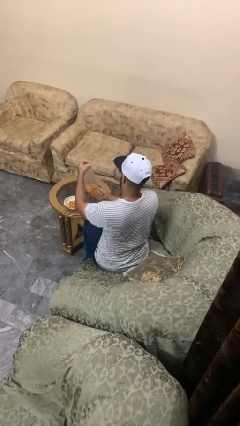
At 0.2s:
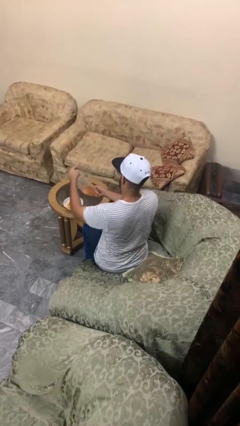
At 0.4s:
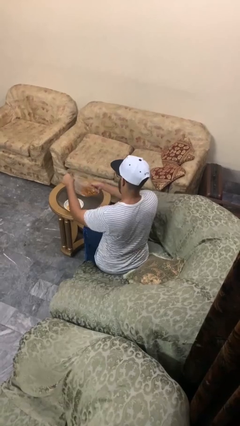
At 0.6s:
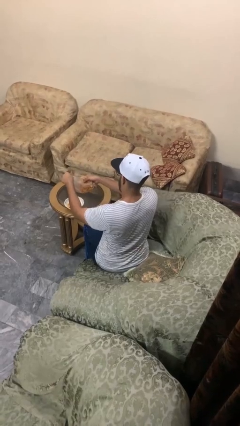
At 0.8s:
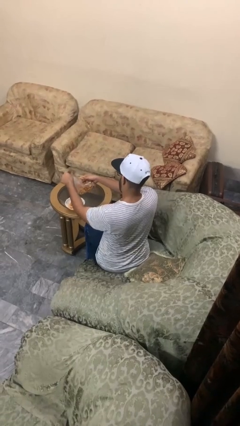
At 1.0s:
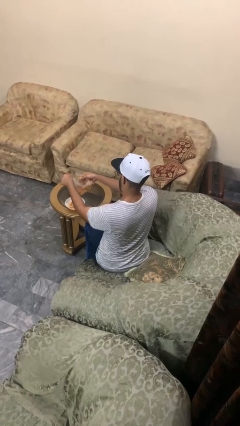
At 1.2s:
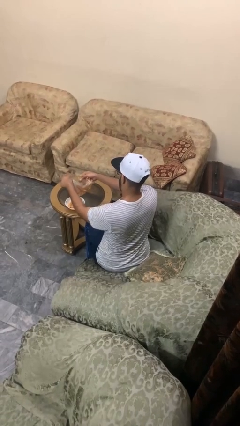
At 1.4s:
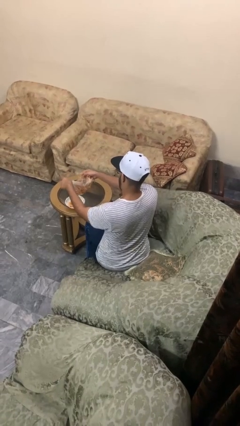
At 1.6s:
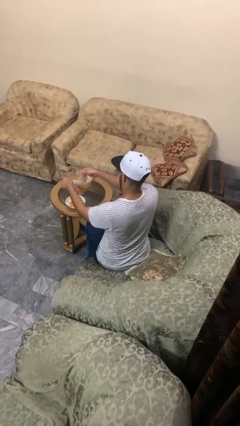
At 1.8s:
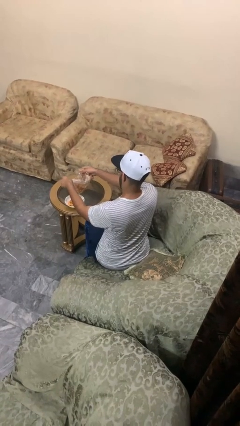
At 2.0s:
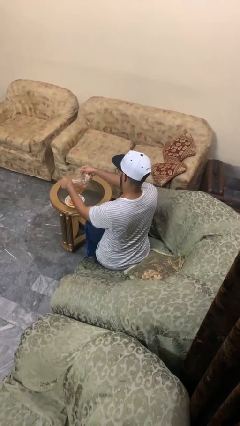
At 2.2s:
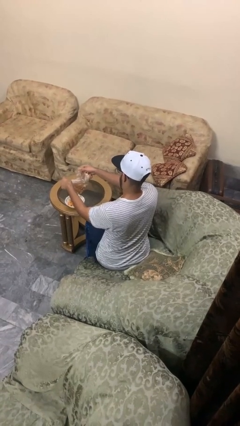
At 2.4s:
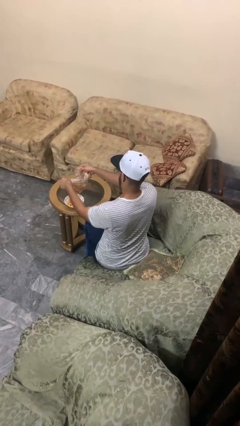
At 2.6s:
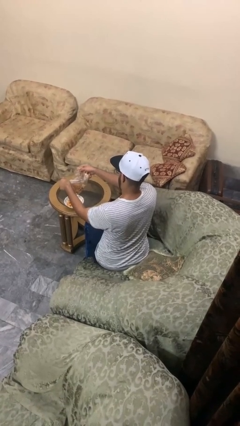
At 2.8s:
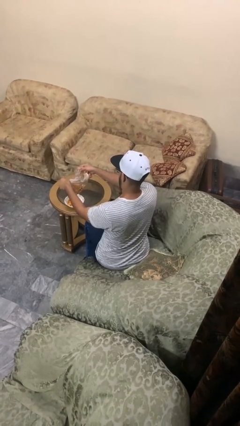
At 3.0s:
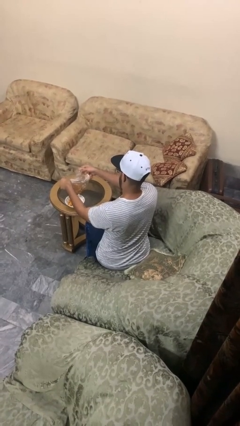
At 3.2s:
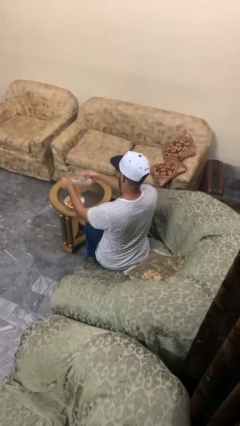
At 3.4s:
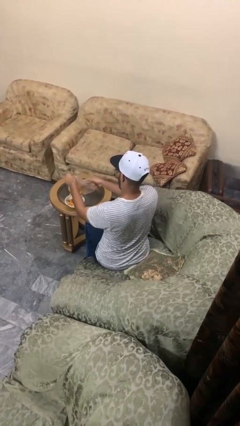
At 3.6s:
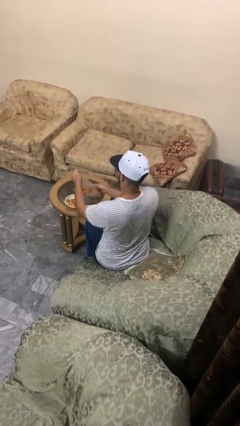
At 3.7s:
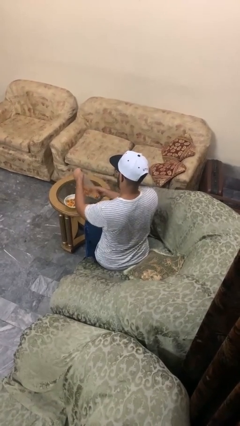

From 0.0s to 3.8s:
person pours into bowl

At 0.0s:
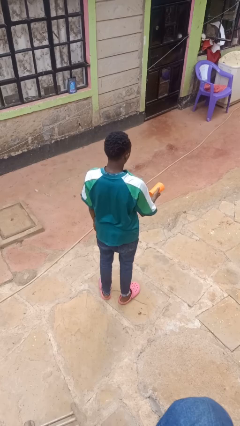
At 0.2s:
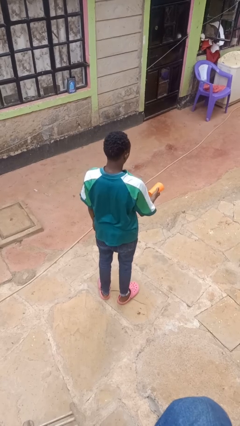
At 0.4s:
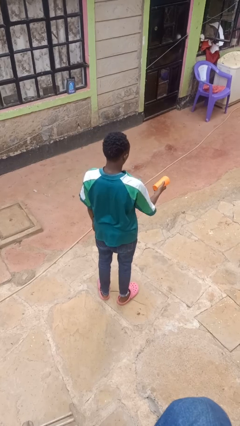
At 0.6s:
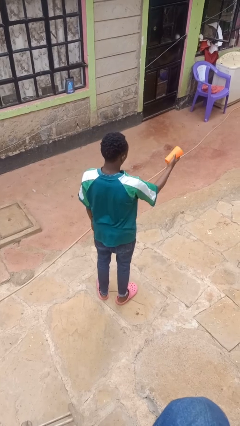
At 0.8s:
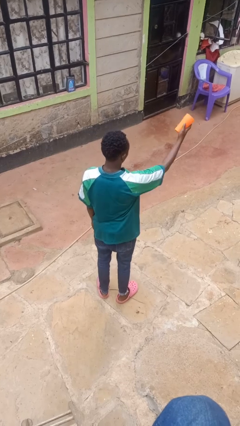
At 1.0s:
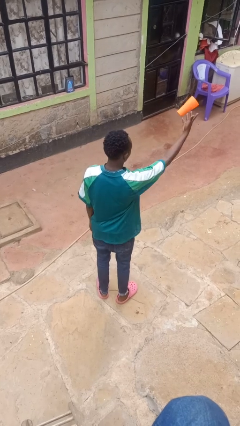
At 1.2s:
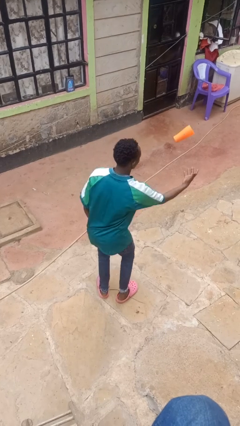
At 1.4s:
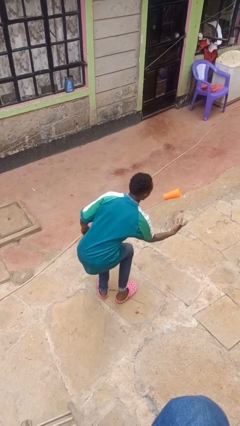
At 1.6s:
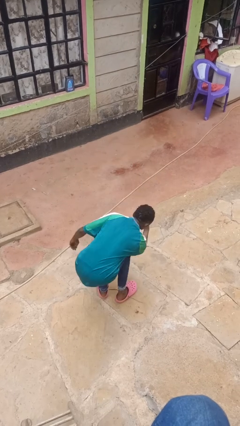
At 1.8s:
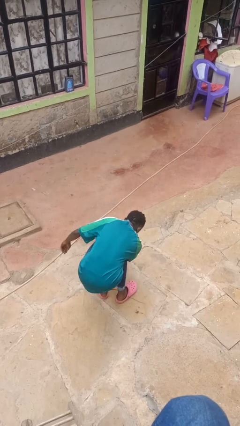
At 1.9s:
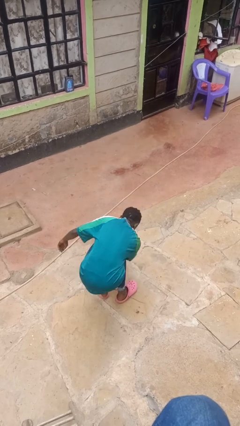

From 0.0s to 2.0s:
person drops object

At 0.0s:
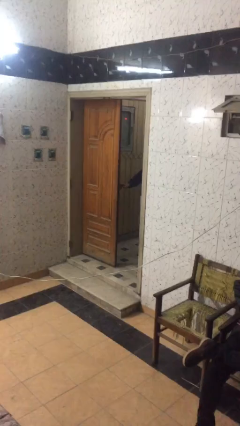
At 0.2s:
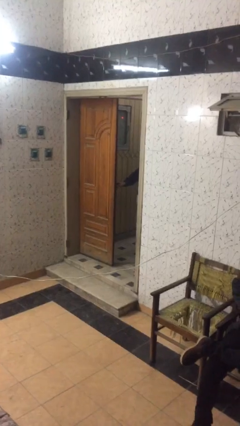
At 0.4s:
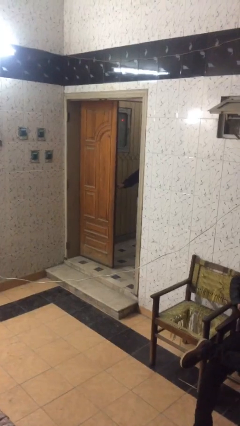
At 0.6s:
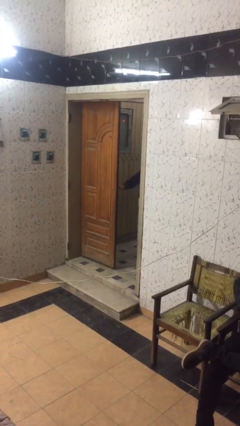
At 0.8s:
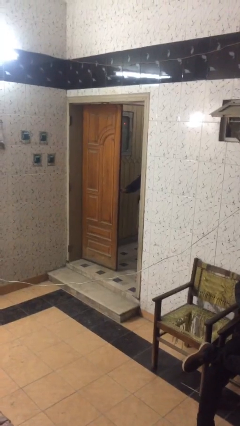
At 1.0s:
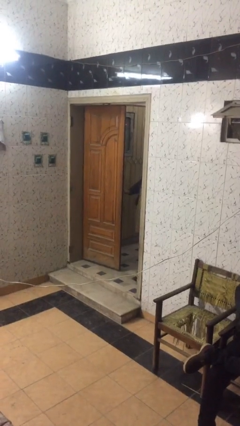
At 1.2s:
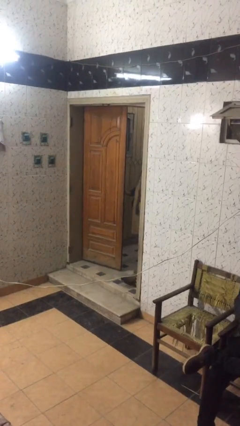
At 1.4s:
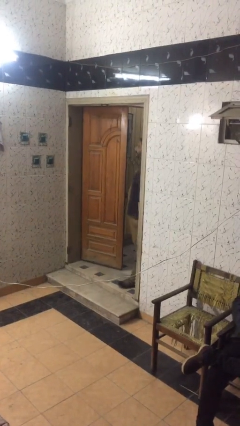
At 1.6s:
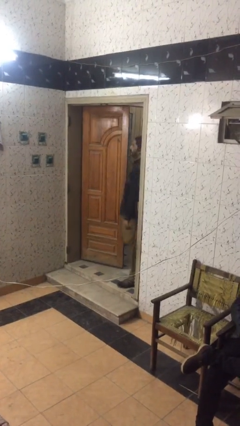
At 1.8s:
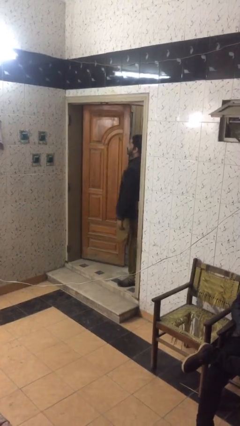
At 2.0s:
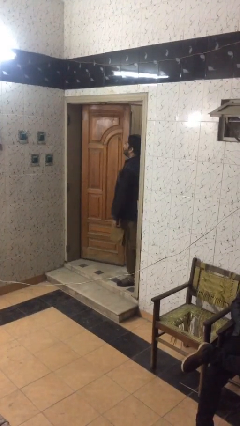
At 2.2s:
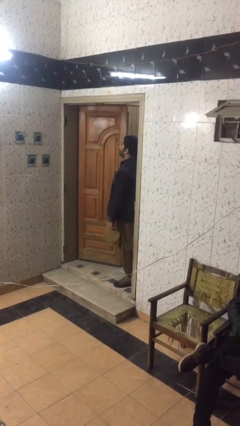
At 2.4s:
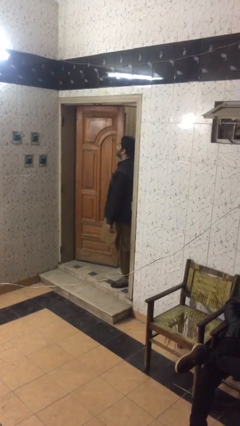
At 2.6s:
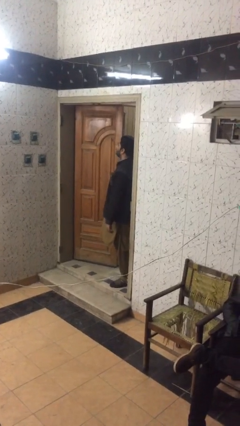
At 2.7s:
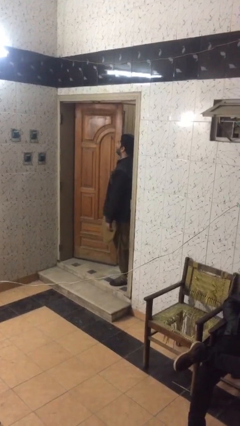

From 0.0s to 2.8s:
person opens facility door

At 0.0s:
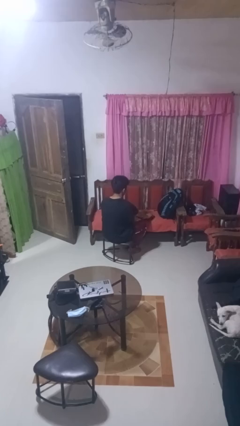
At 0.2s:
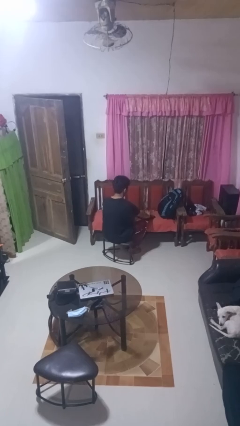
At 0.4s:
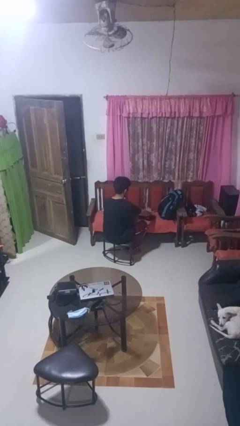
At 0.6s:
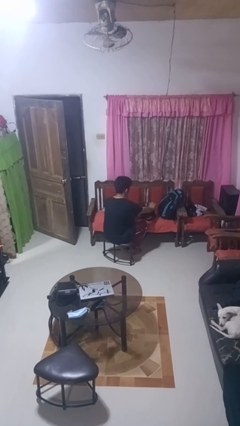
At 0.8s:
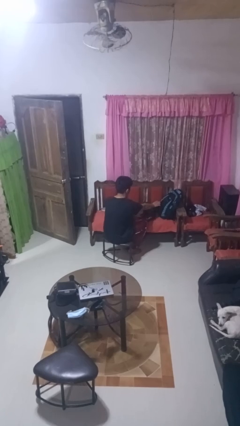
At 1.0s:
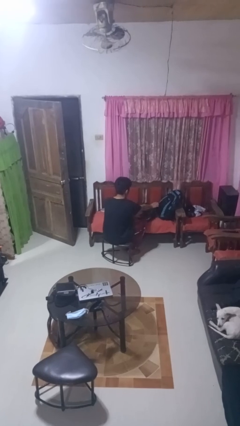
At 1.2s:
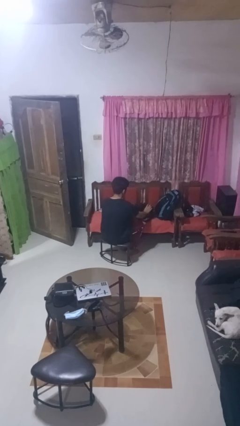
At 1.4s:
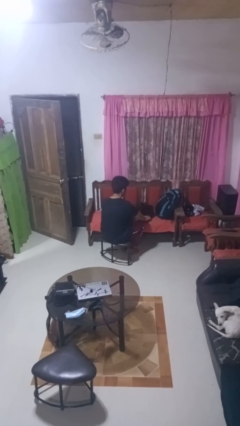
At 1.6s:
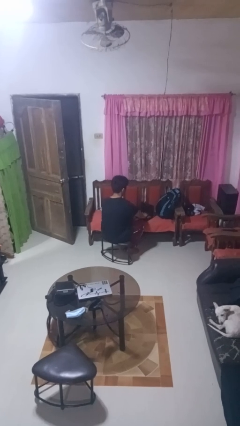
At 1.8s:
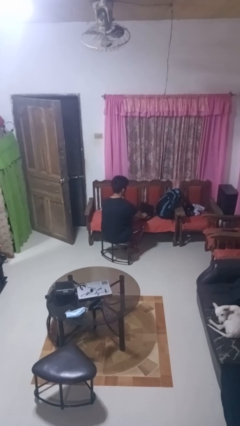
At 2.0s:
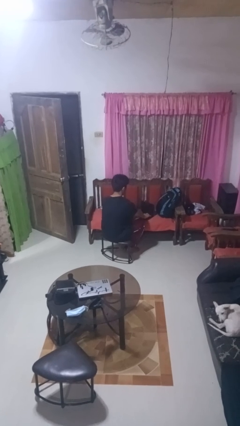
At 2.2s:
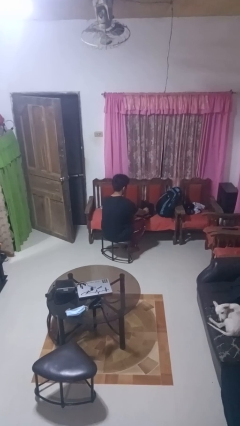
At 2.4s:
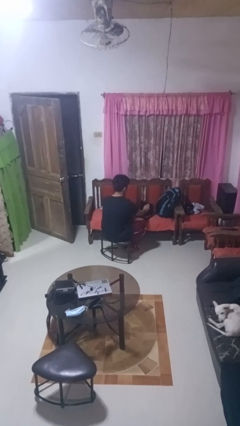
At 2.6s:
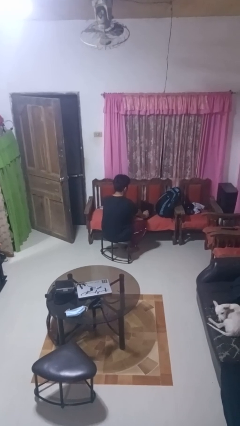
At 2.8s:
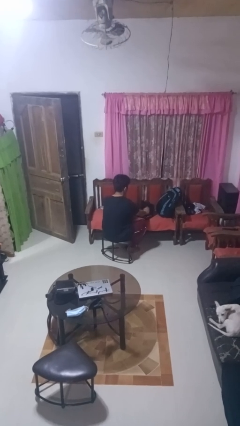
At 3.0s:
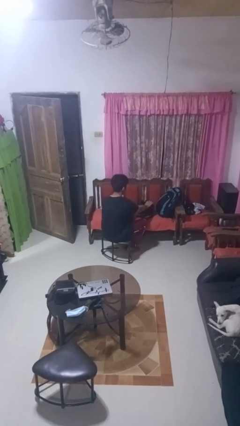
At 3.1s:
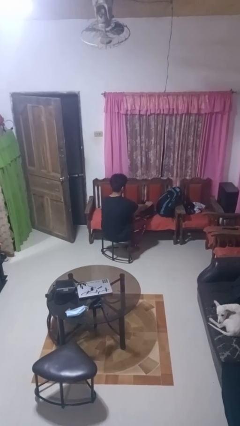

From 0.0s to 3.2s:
person opens laptop

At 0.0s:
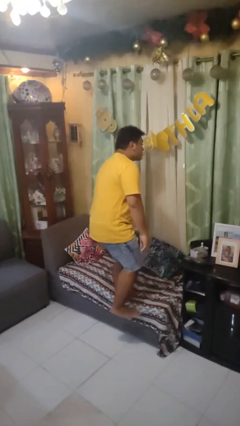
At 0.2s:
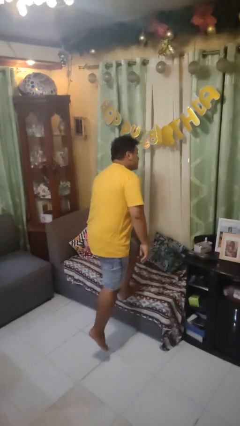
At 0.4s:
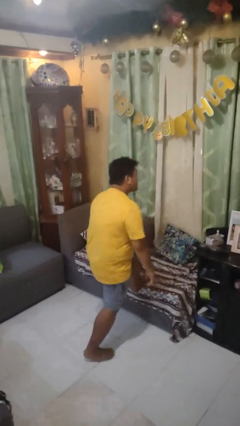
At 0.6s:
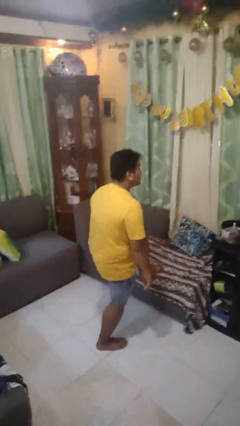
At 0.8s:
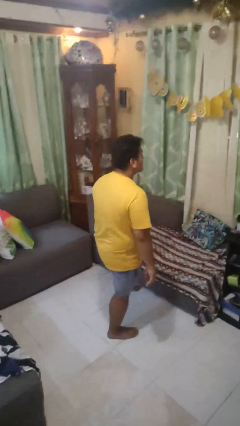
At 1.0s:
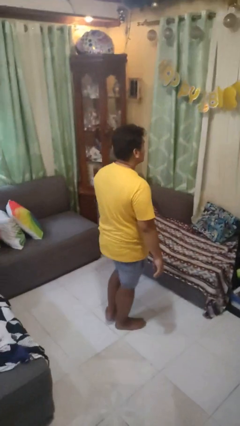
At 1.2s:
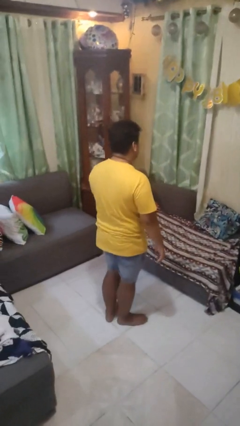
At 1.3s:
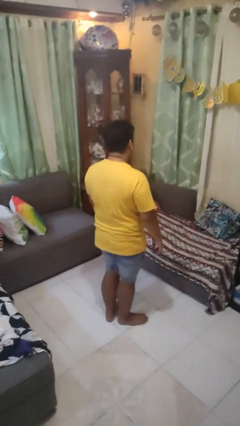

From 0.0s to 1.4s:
person climbs off couch

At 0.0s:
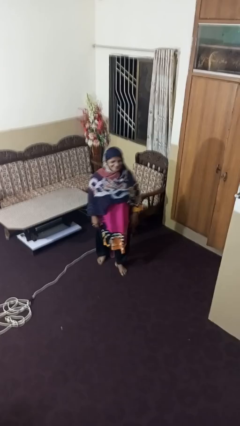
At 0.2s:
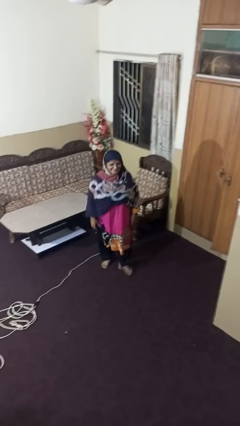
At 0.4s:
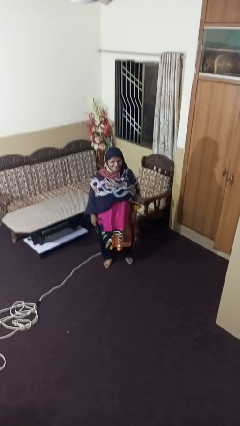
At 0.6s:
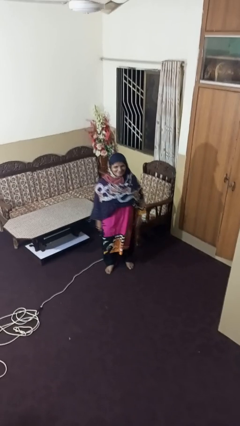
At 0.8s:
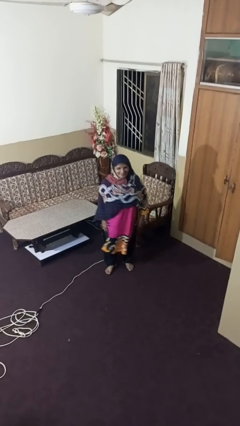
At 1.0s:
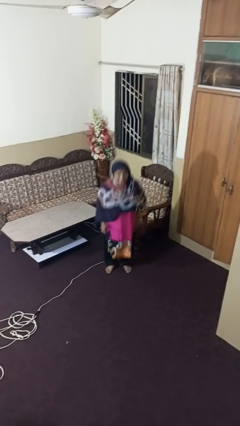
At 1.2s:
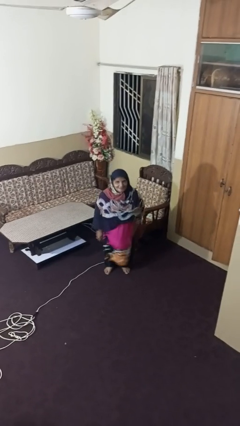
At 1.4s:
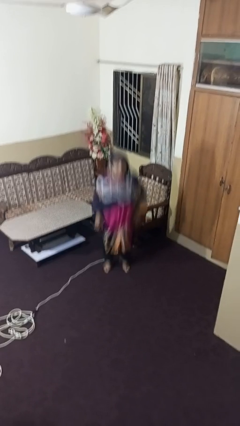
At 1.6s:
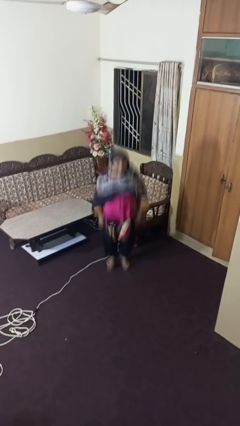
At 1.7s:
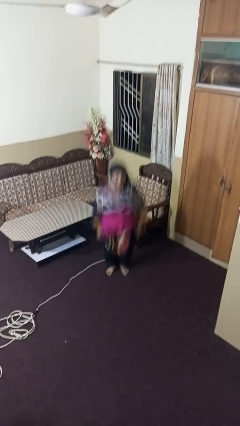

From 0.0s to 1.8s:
person jumps

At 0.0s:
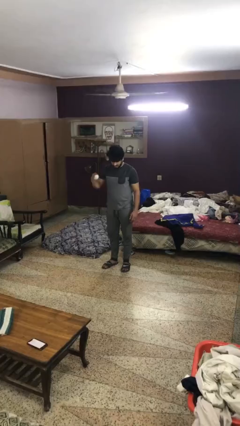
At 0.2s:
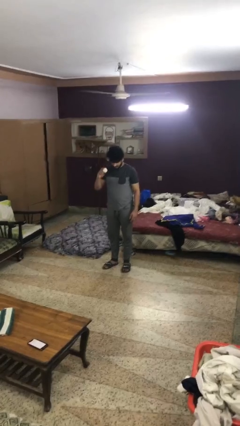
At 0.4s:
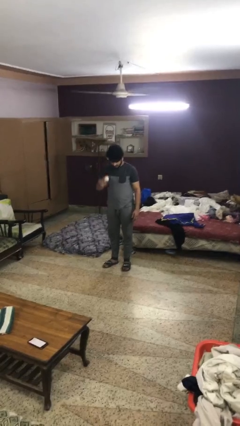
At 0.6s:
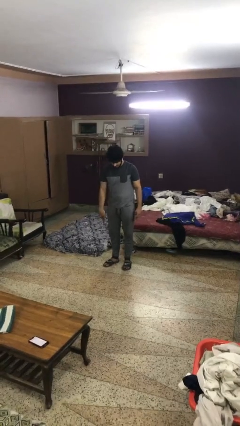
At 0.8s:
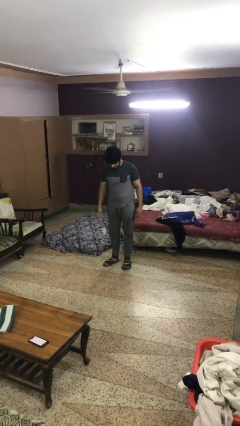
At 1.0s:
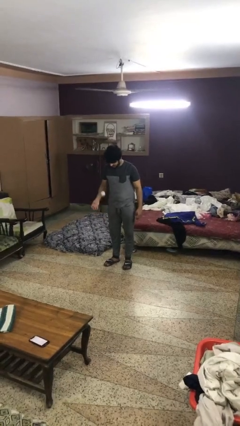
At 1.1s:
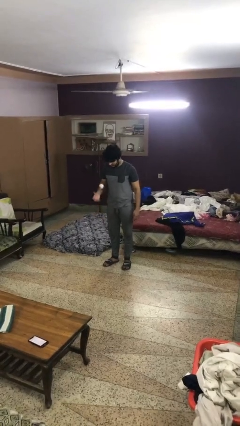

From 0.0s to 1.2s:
person bounces ball on floor

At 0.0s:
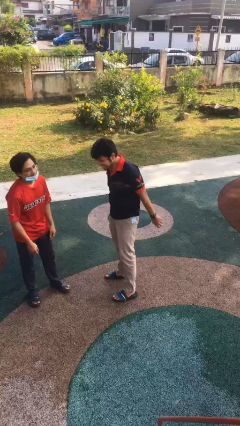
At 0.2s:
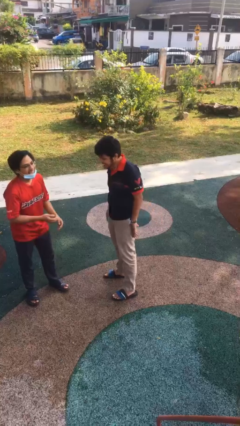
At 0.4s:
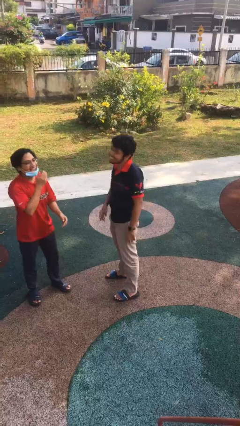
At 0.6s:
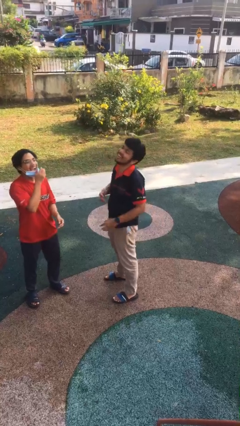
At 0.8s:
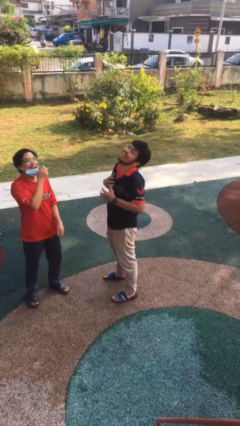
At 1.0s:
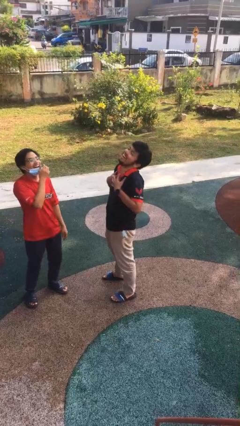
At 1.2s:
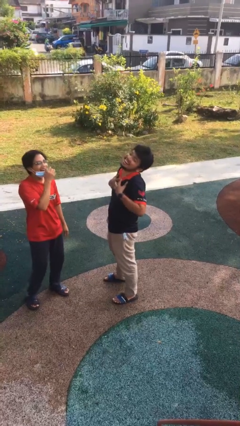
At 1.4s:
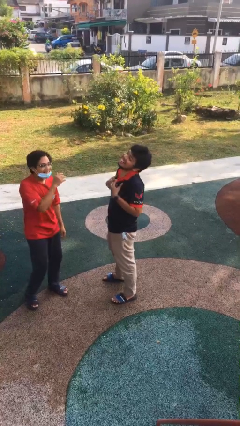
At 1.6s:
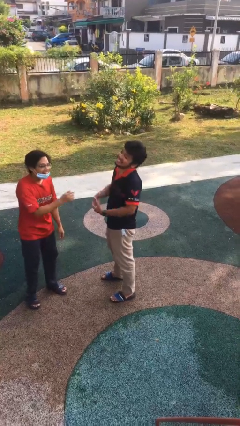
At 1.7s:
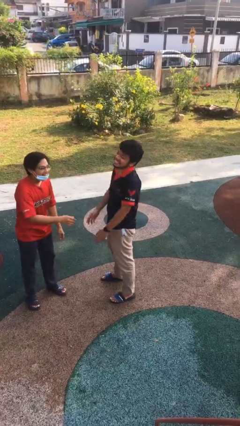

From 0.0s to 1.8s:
person laughs with person
